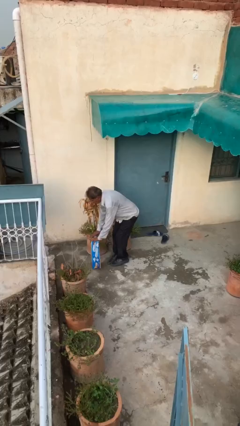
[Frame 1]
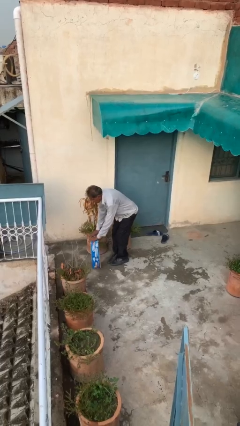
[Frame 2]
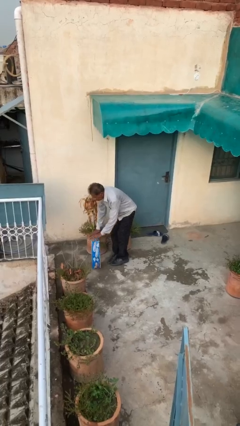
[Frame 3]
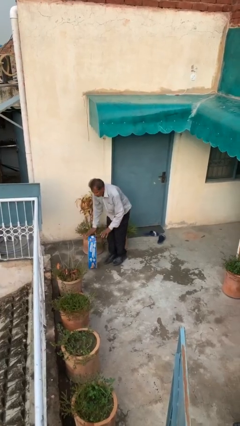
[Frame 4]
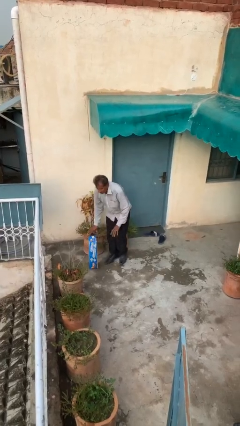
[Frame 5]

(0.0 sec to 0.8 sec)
person puts down object on floor

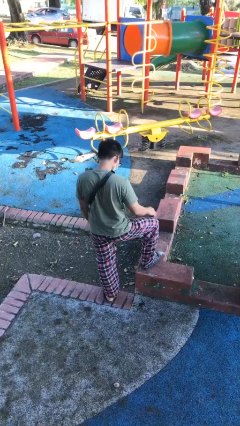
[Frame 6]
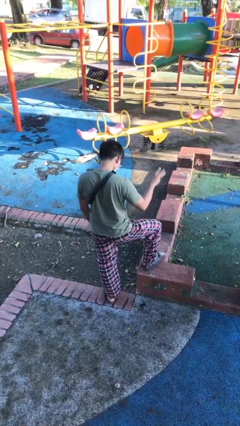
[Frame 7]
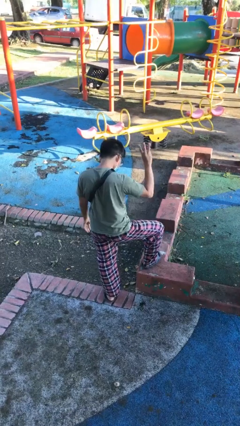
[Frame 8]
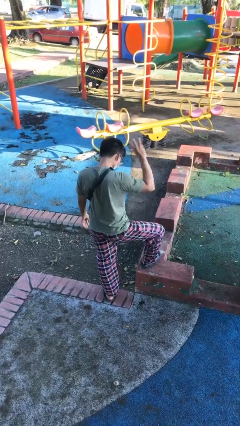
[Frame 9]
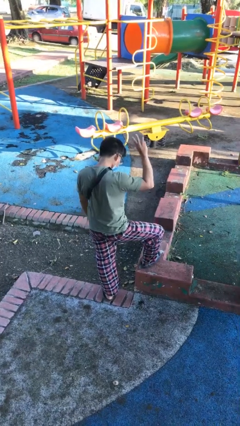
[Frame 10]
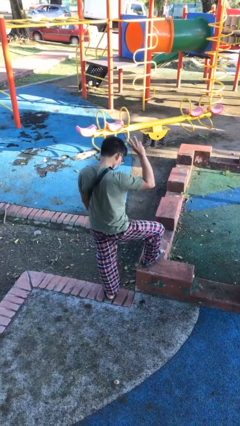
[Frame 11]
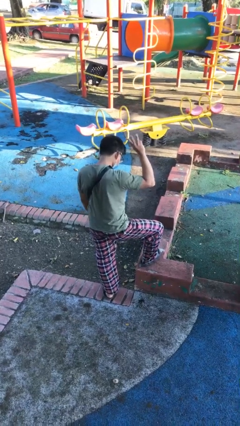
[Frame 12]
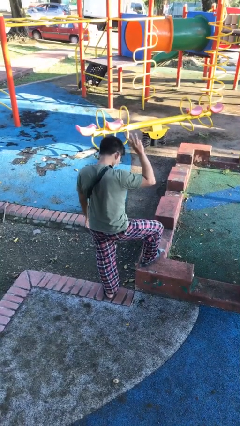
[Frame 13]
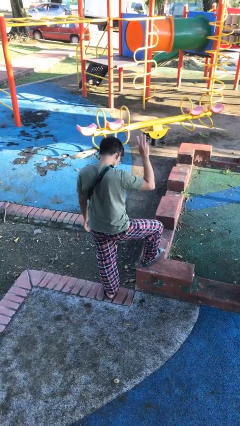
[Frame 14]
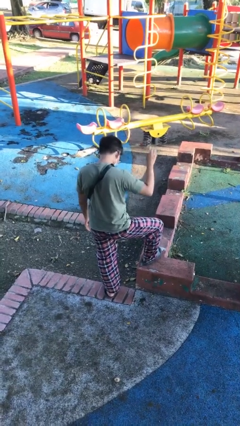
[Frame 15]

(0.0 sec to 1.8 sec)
person gestures number three

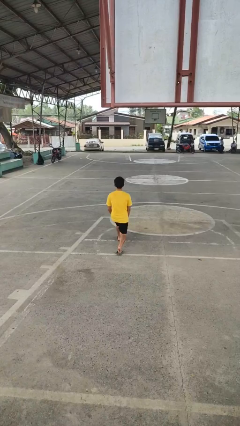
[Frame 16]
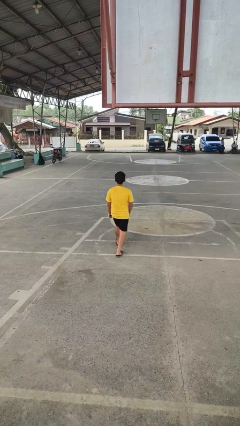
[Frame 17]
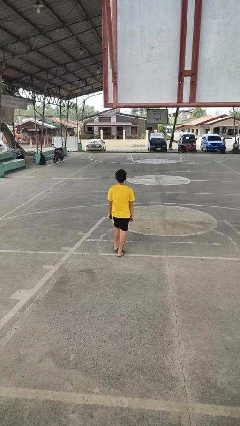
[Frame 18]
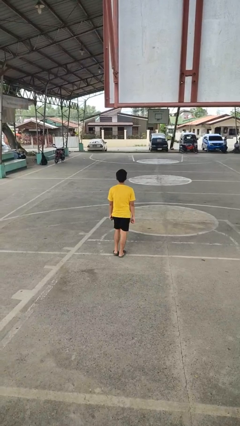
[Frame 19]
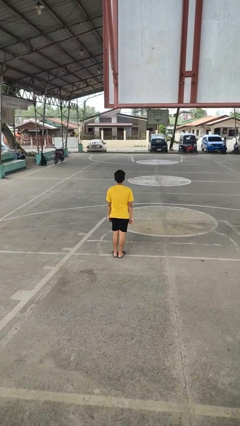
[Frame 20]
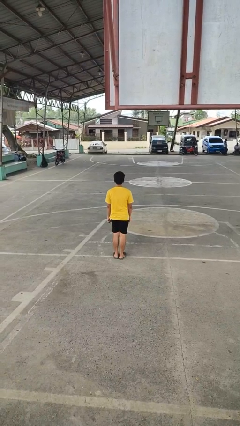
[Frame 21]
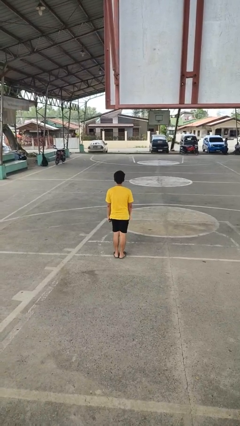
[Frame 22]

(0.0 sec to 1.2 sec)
person stands up from floor

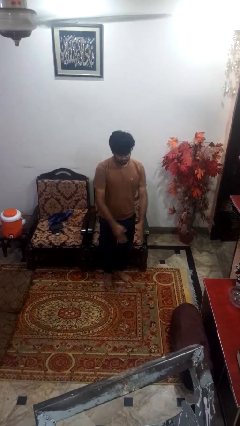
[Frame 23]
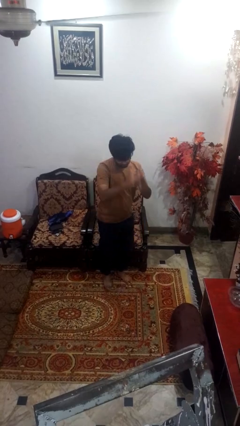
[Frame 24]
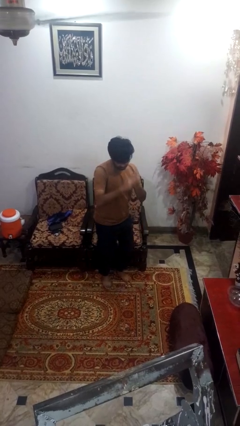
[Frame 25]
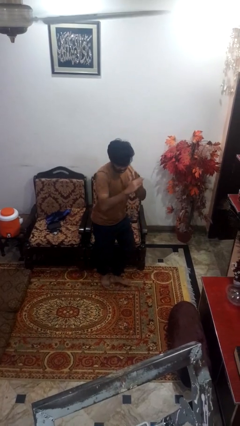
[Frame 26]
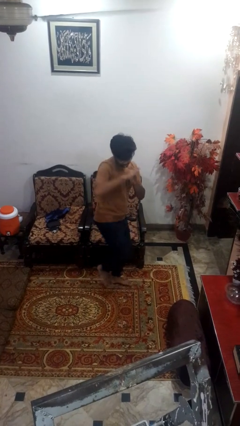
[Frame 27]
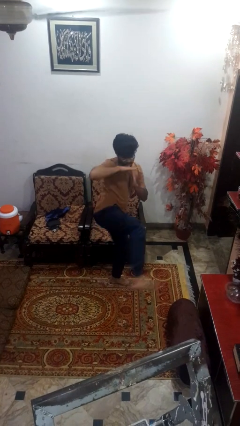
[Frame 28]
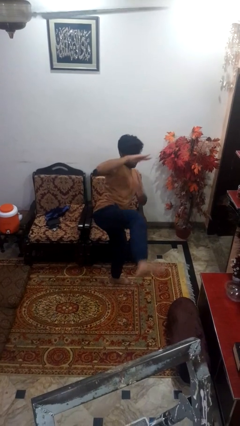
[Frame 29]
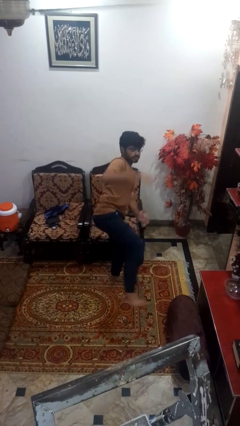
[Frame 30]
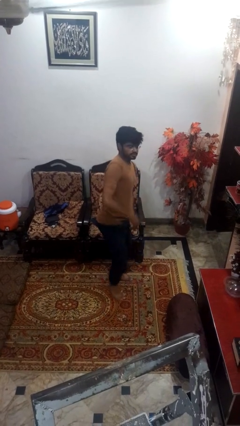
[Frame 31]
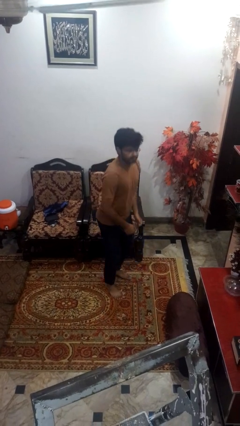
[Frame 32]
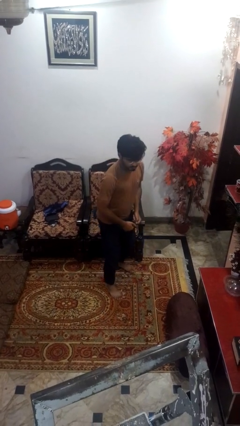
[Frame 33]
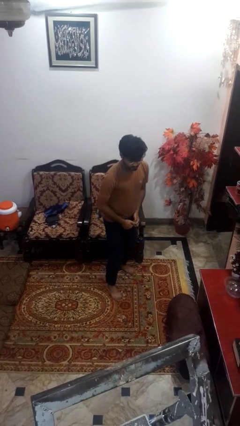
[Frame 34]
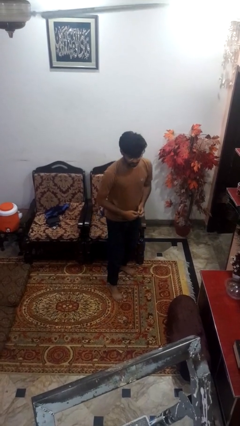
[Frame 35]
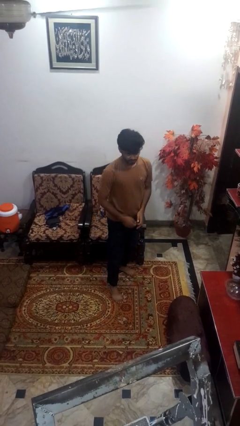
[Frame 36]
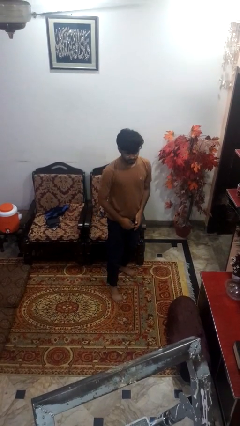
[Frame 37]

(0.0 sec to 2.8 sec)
person karate kicks

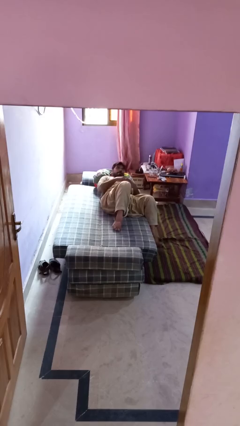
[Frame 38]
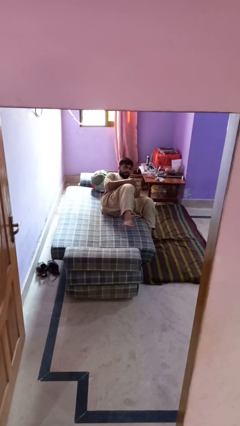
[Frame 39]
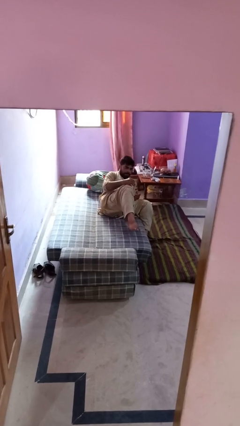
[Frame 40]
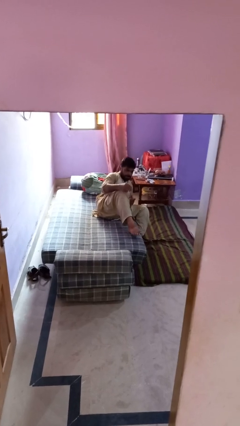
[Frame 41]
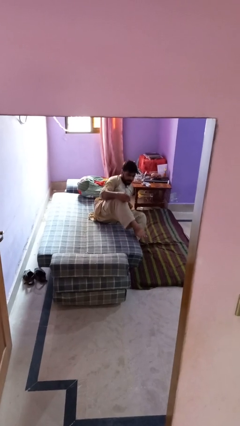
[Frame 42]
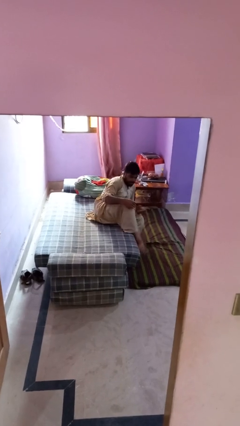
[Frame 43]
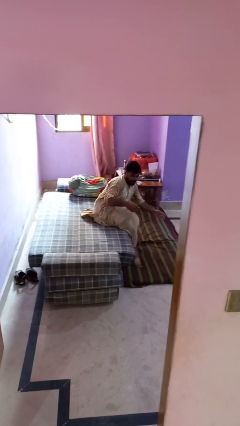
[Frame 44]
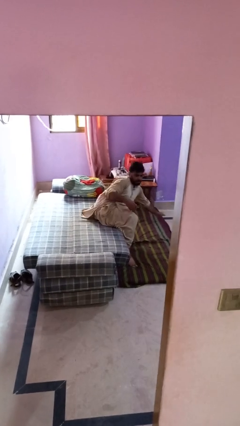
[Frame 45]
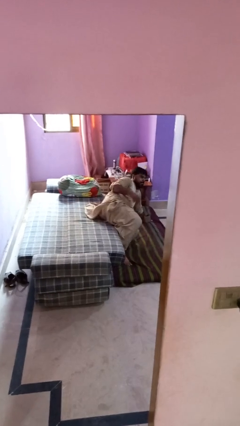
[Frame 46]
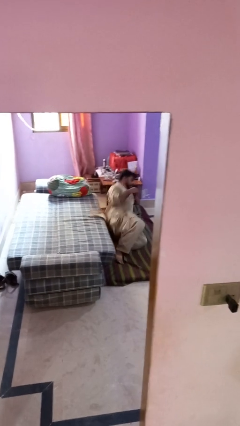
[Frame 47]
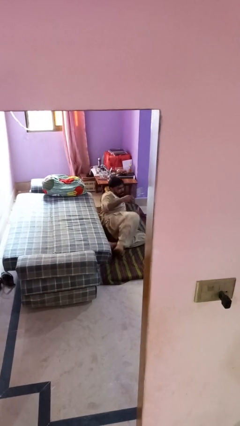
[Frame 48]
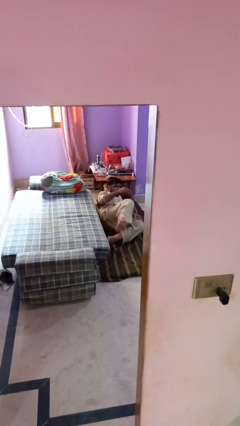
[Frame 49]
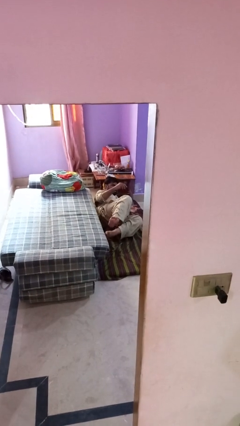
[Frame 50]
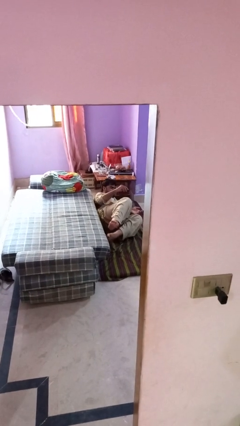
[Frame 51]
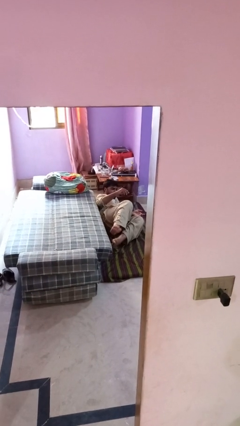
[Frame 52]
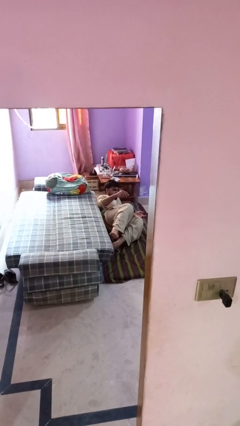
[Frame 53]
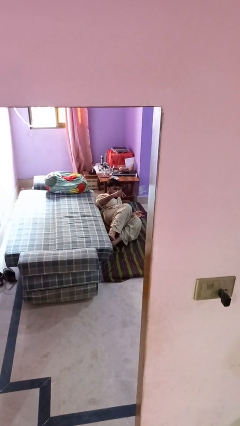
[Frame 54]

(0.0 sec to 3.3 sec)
person falls from bed

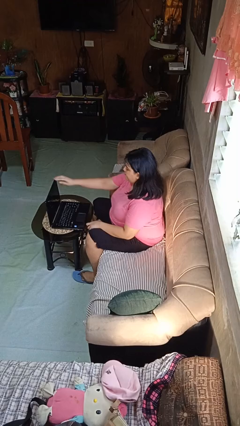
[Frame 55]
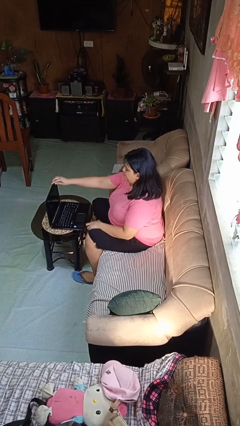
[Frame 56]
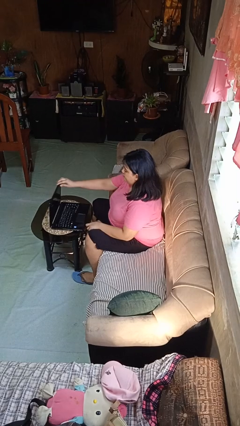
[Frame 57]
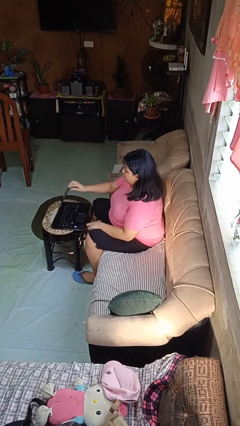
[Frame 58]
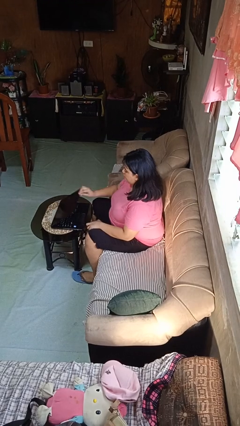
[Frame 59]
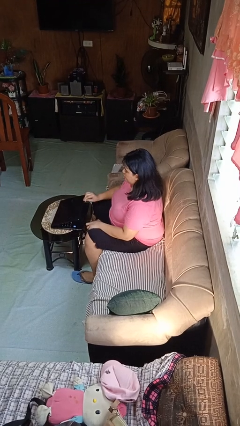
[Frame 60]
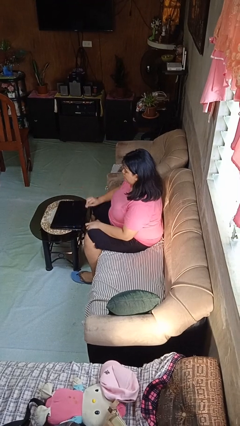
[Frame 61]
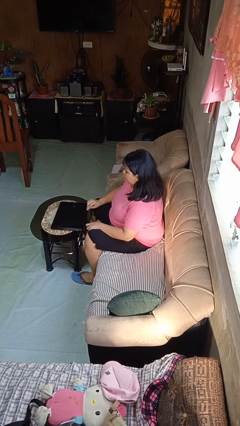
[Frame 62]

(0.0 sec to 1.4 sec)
person closes laptop

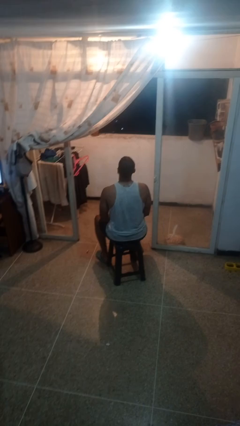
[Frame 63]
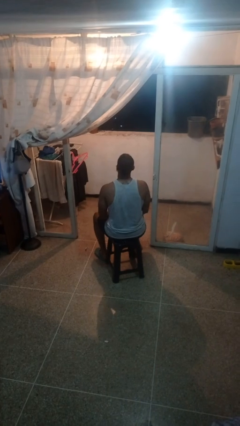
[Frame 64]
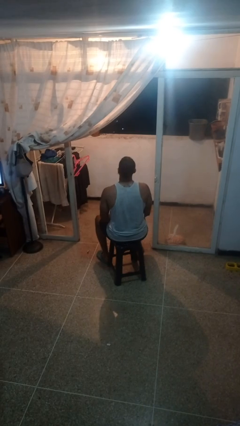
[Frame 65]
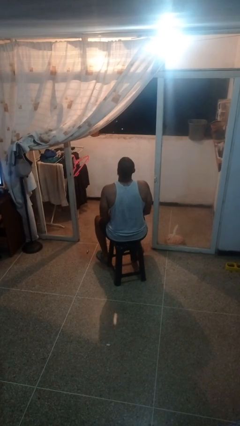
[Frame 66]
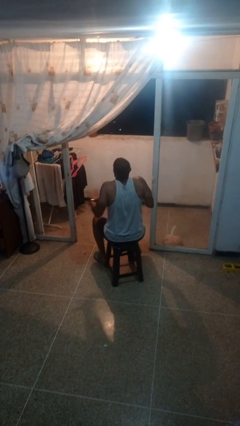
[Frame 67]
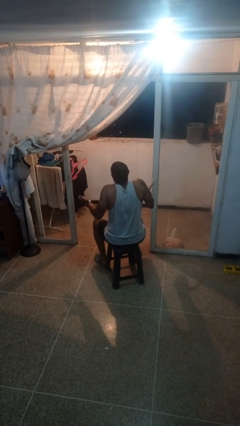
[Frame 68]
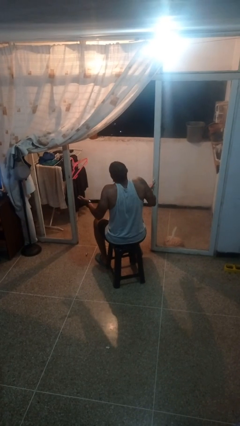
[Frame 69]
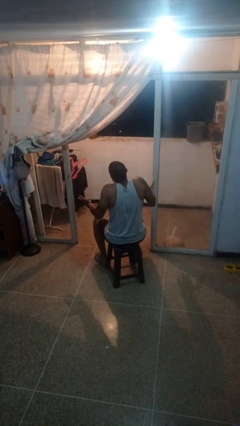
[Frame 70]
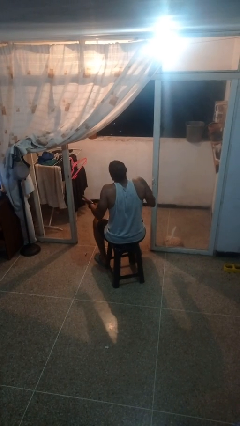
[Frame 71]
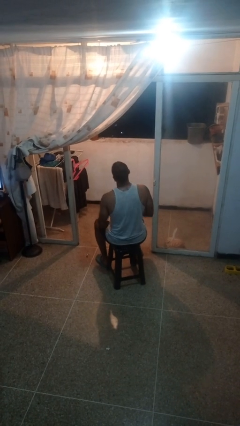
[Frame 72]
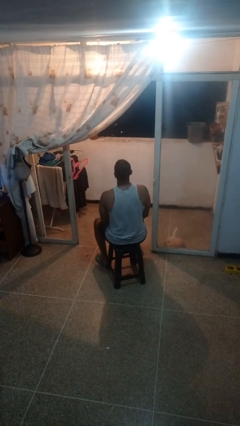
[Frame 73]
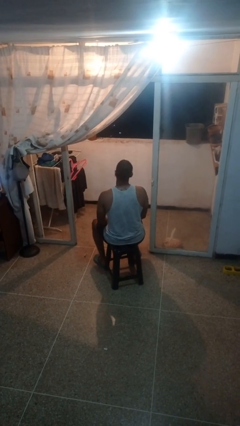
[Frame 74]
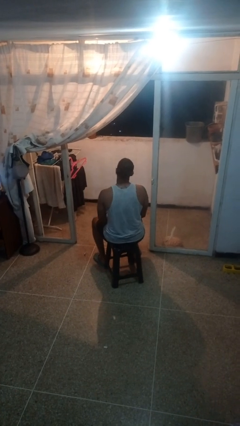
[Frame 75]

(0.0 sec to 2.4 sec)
person shrugs

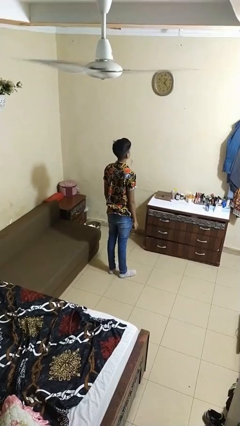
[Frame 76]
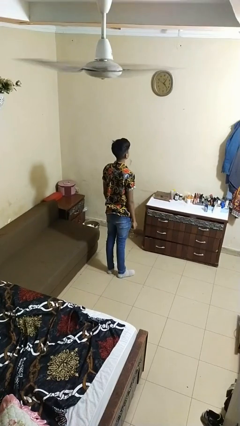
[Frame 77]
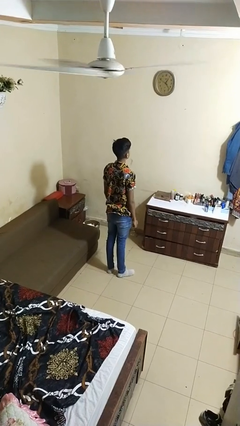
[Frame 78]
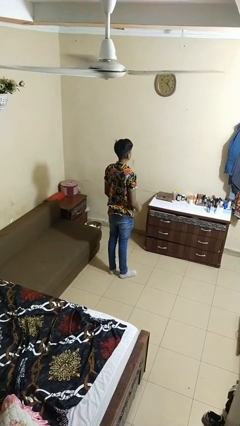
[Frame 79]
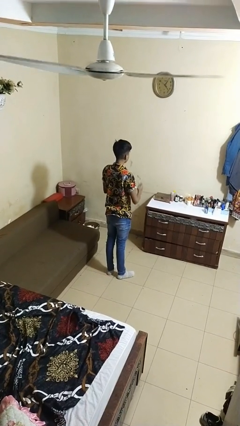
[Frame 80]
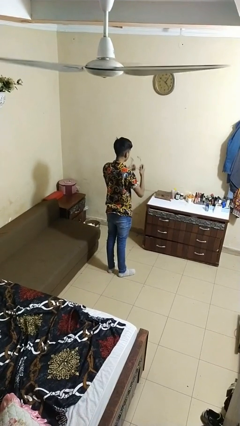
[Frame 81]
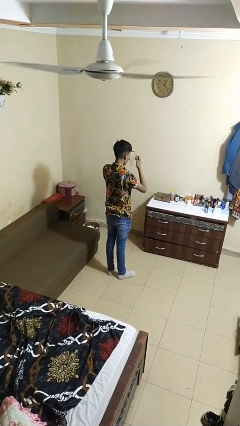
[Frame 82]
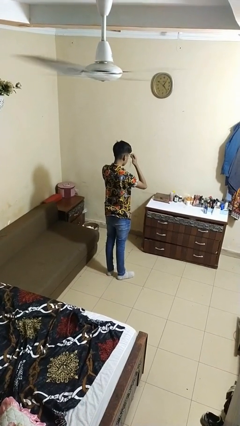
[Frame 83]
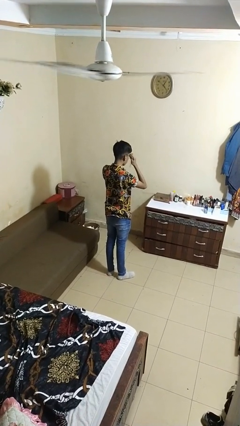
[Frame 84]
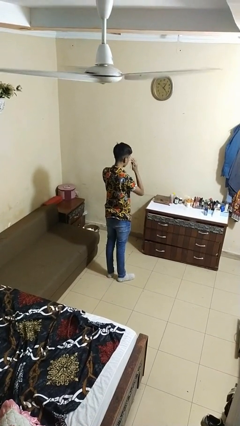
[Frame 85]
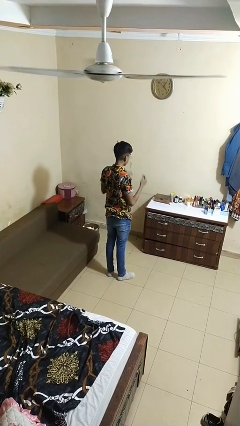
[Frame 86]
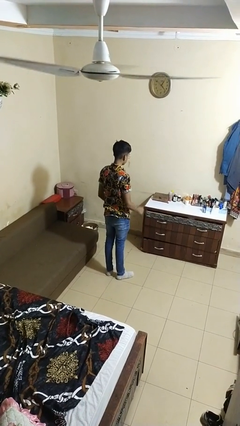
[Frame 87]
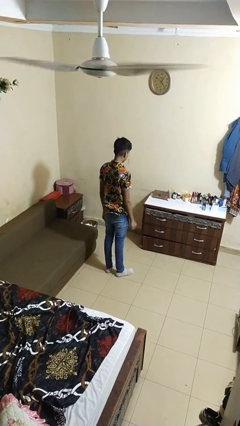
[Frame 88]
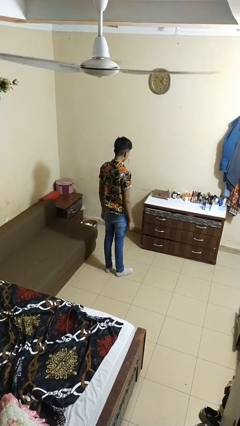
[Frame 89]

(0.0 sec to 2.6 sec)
person puts on glasses
